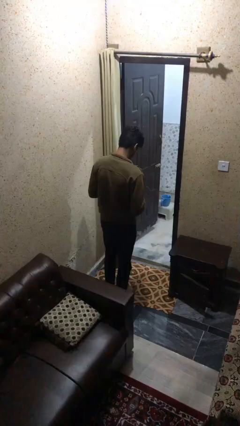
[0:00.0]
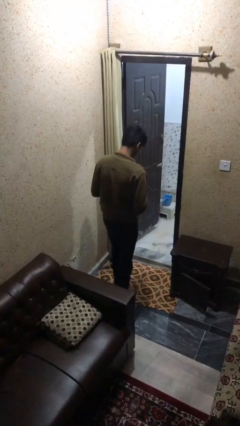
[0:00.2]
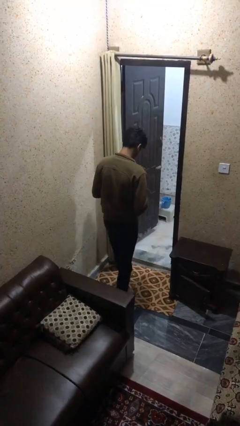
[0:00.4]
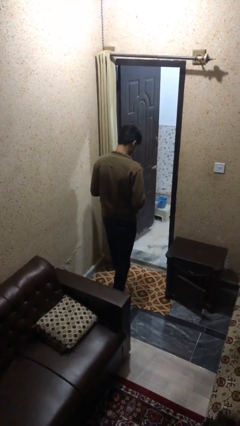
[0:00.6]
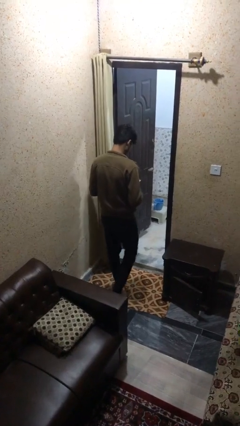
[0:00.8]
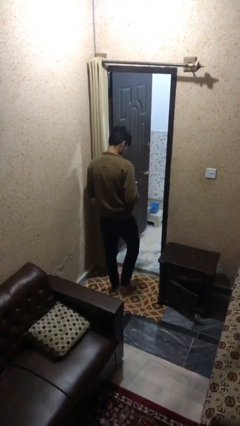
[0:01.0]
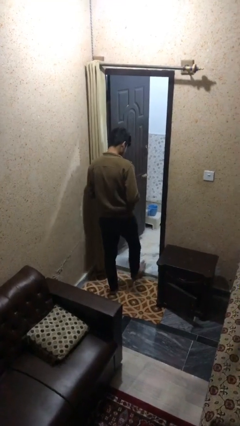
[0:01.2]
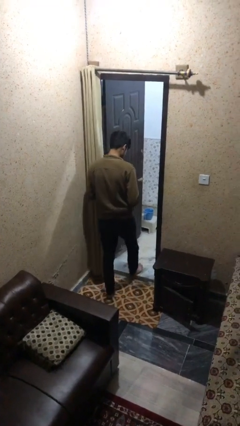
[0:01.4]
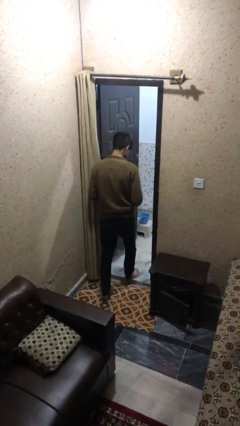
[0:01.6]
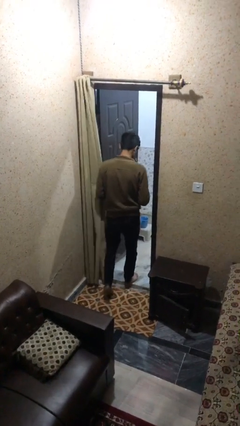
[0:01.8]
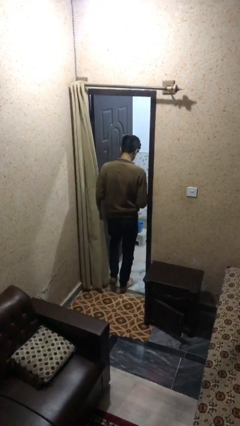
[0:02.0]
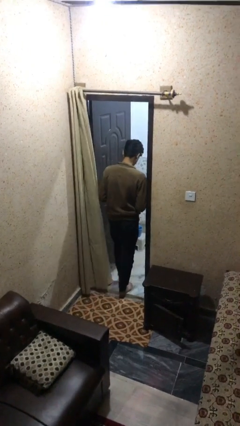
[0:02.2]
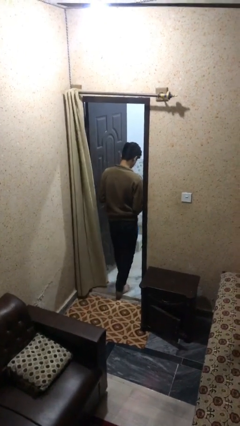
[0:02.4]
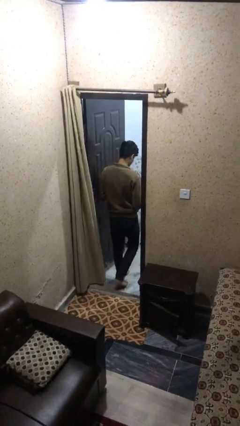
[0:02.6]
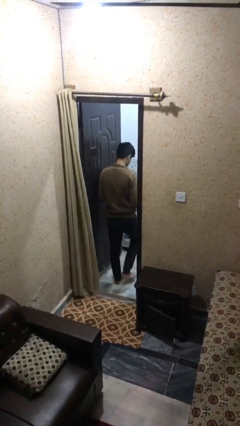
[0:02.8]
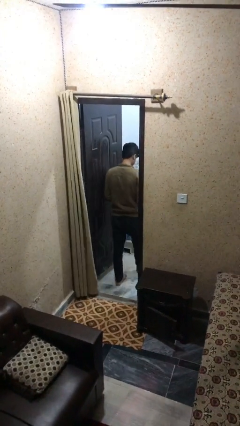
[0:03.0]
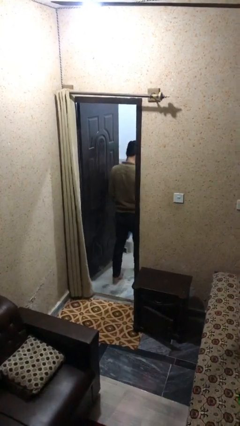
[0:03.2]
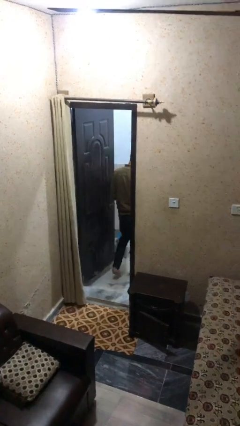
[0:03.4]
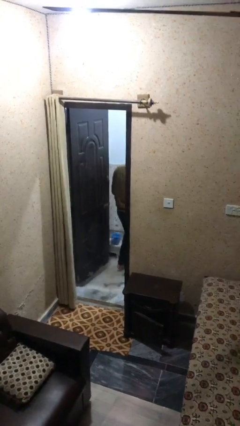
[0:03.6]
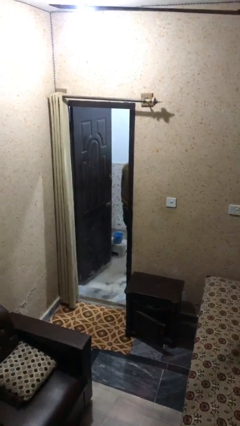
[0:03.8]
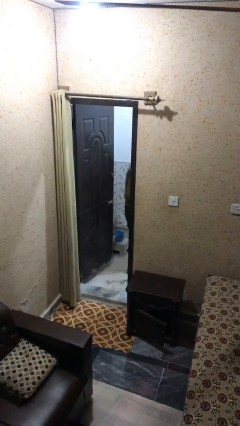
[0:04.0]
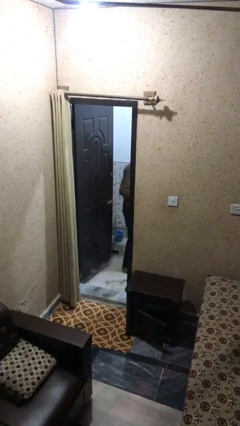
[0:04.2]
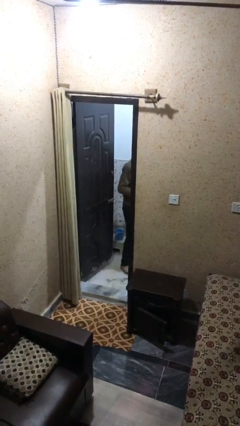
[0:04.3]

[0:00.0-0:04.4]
person enters scene through structure

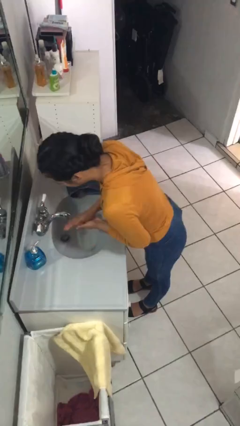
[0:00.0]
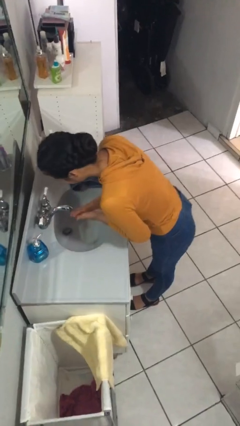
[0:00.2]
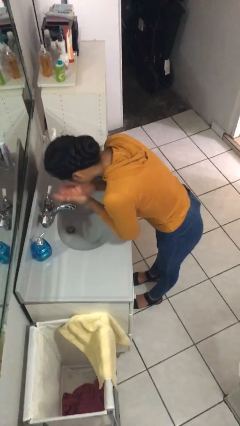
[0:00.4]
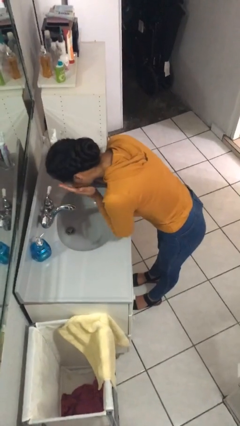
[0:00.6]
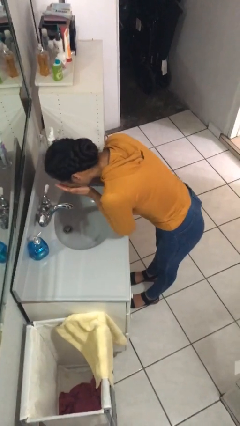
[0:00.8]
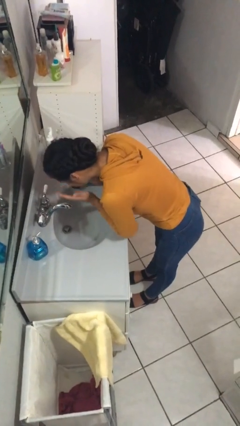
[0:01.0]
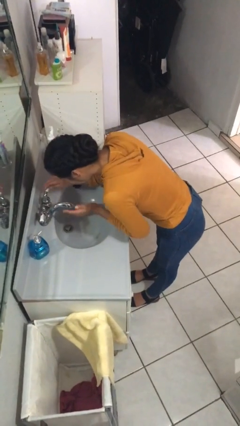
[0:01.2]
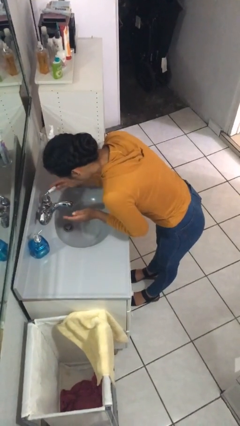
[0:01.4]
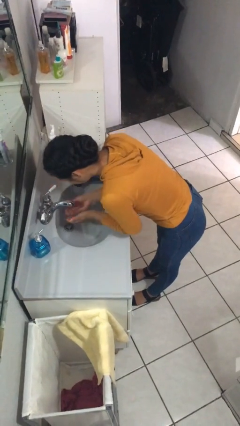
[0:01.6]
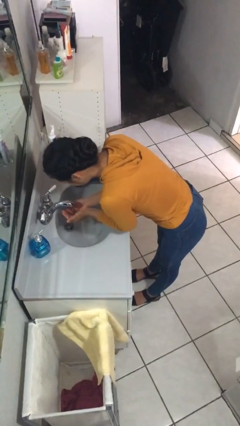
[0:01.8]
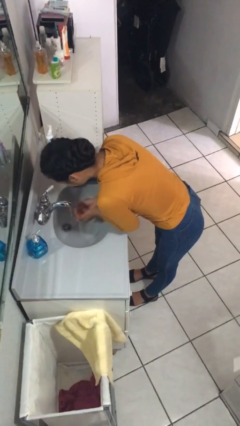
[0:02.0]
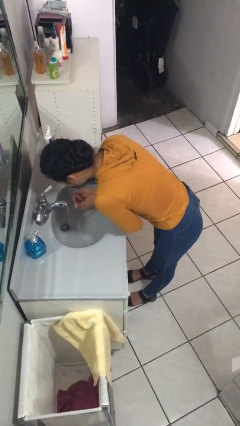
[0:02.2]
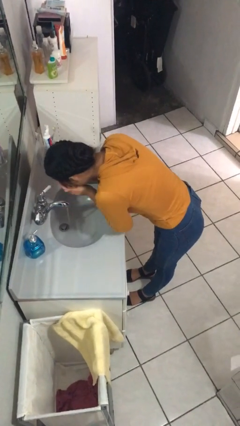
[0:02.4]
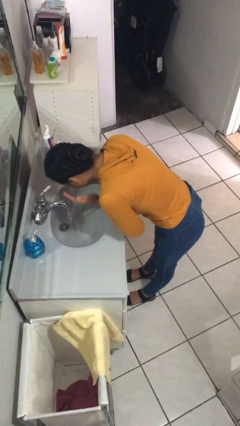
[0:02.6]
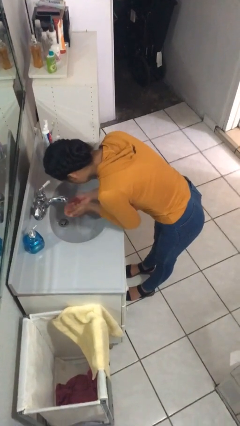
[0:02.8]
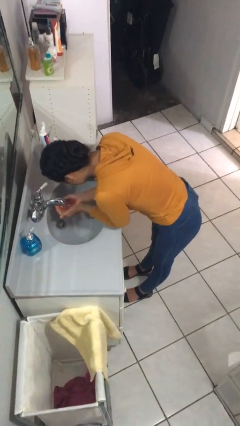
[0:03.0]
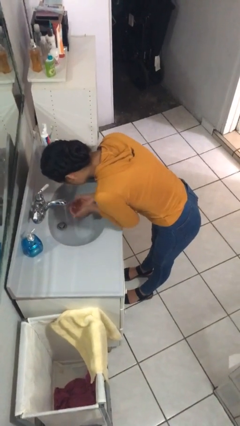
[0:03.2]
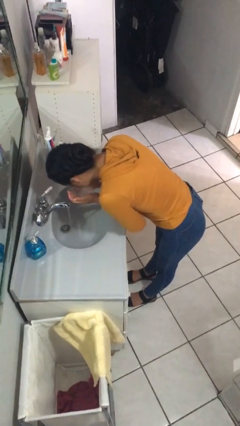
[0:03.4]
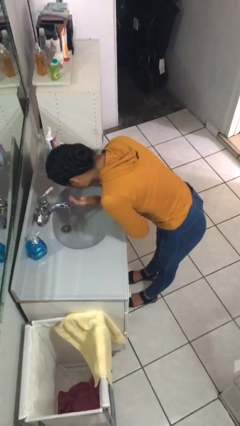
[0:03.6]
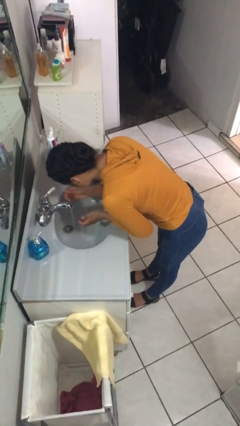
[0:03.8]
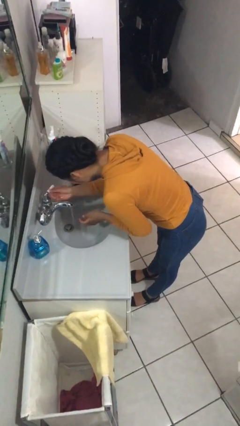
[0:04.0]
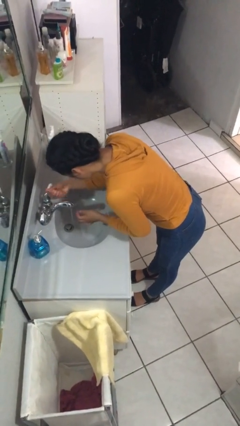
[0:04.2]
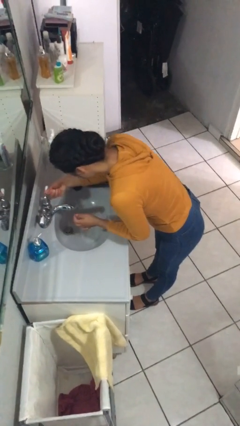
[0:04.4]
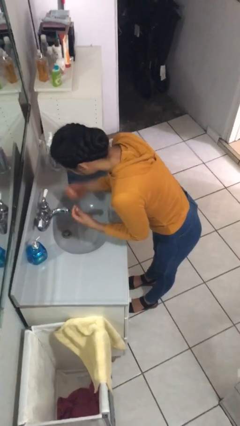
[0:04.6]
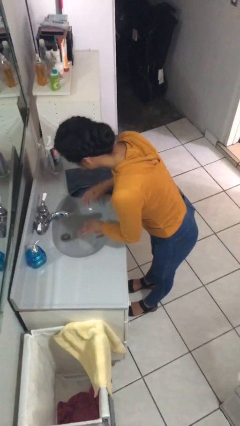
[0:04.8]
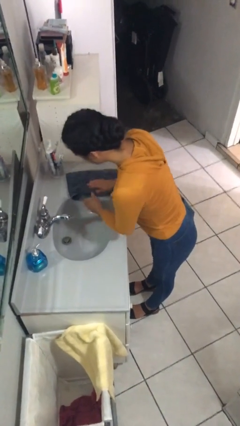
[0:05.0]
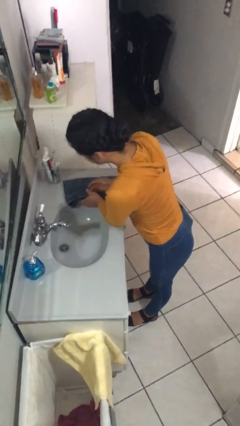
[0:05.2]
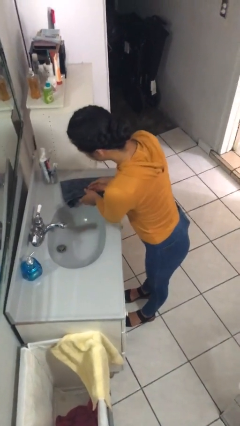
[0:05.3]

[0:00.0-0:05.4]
person washes face

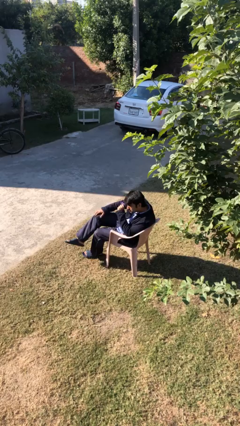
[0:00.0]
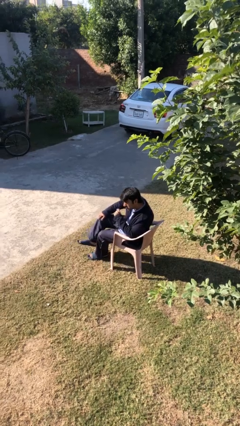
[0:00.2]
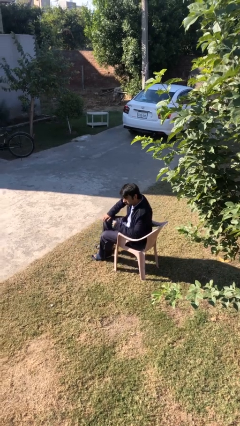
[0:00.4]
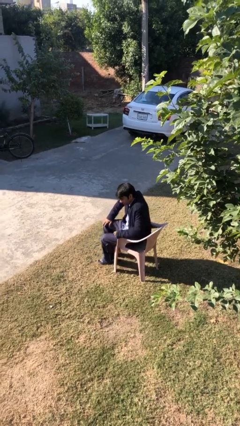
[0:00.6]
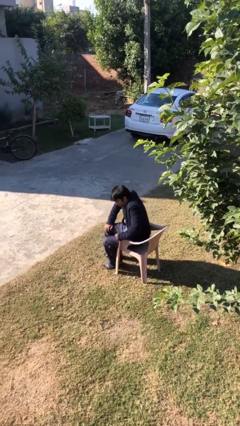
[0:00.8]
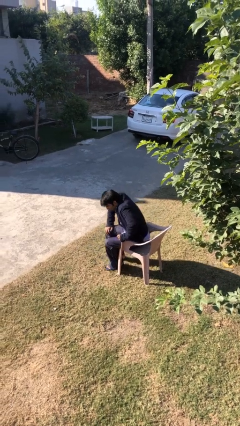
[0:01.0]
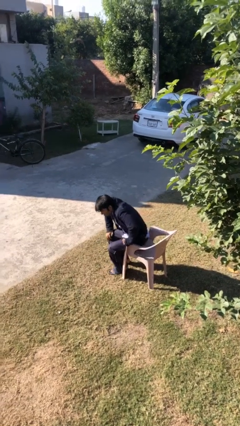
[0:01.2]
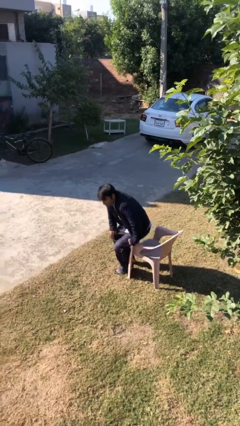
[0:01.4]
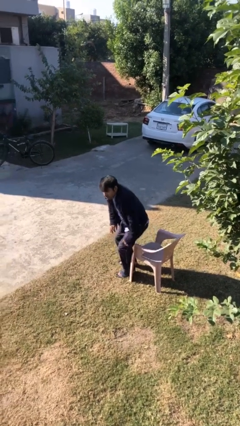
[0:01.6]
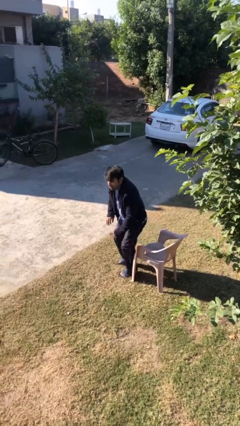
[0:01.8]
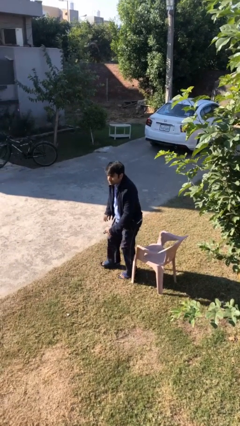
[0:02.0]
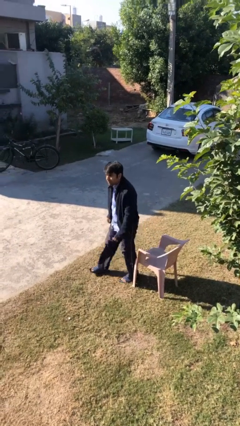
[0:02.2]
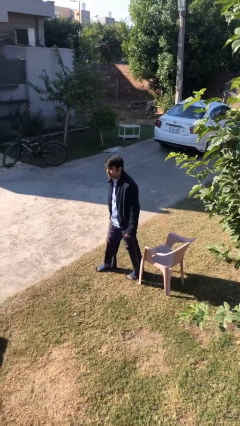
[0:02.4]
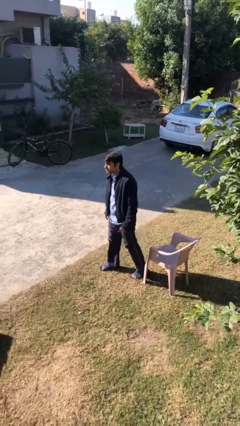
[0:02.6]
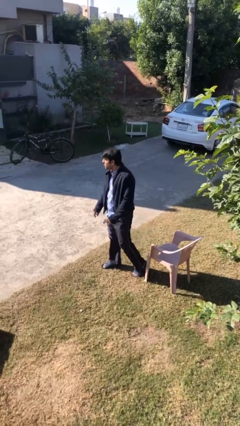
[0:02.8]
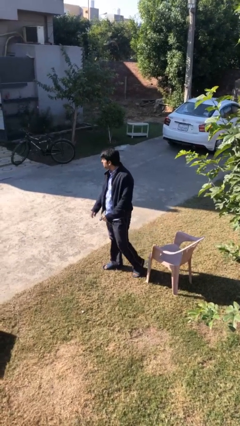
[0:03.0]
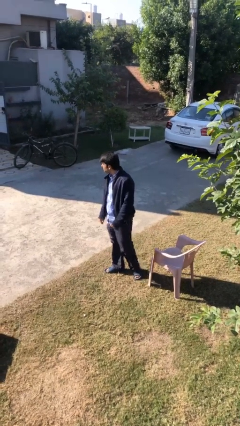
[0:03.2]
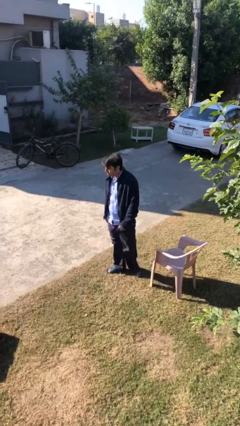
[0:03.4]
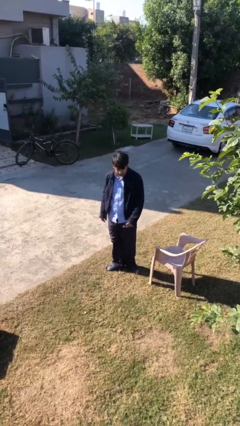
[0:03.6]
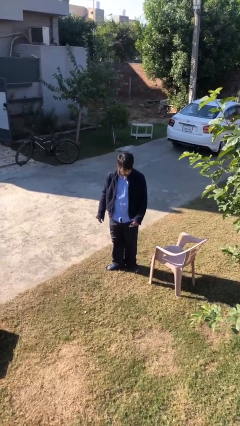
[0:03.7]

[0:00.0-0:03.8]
person stands up

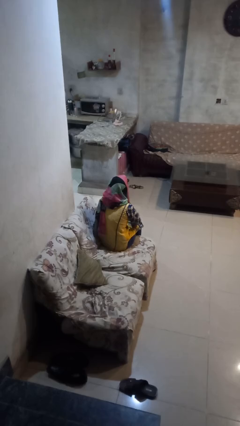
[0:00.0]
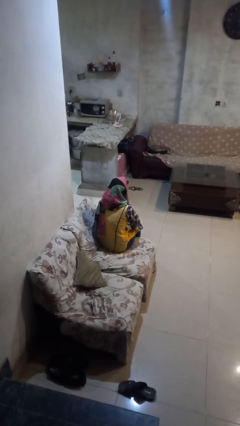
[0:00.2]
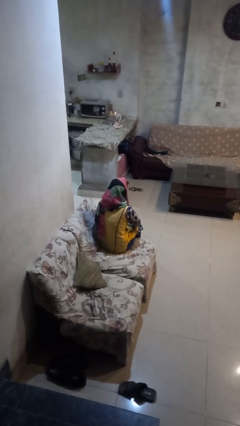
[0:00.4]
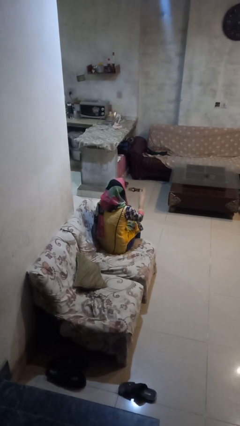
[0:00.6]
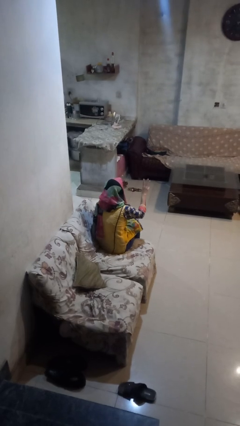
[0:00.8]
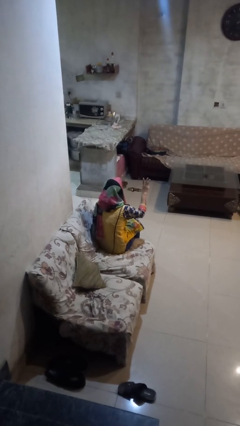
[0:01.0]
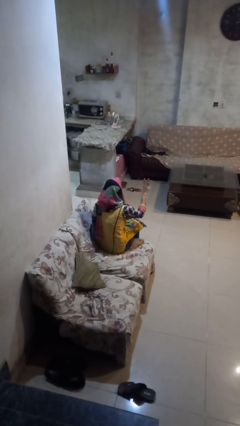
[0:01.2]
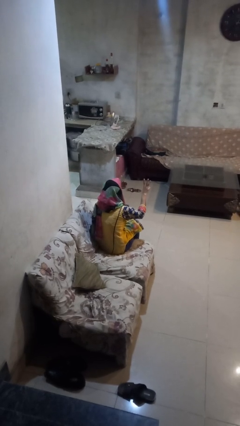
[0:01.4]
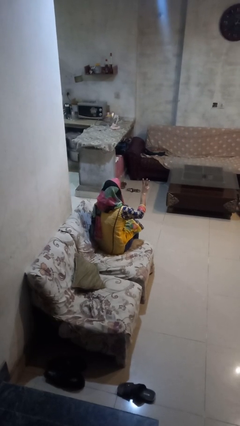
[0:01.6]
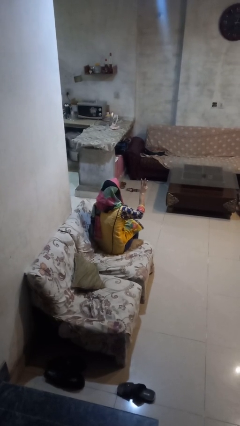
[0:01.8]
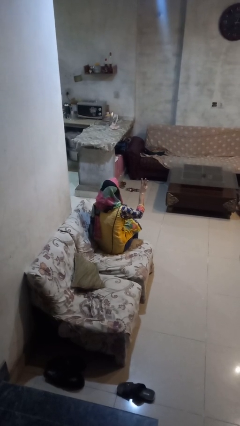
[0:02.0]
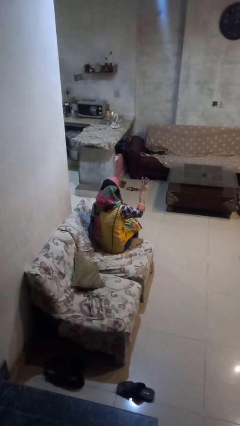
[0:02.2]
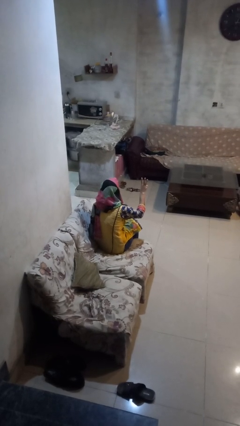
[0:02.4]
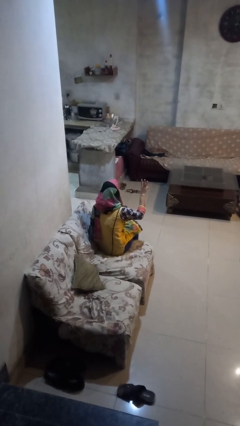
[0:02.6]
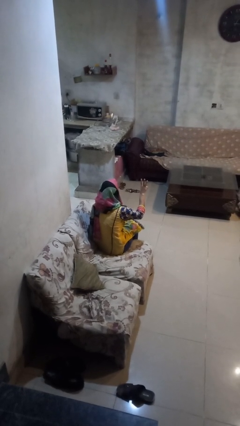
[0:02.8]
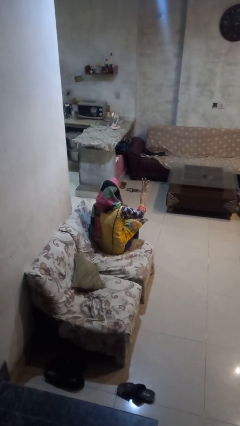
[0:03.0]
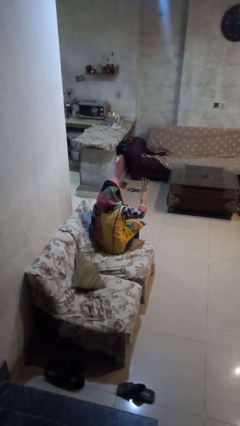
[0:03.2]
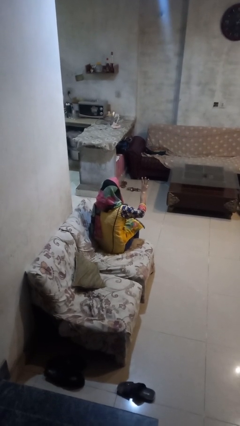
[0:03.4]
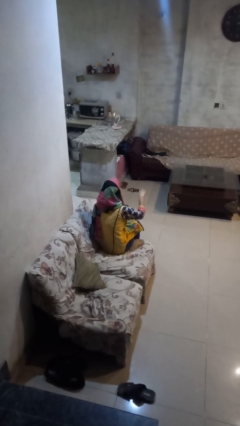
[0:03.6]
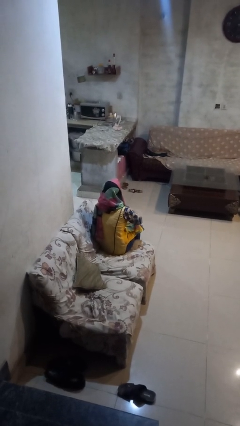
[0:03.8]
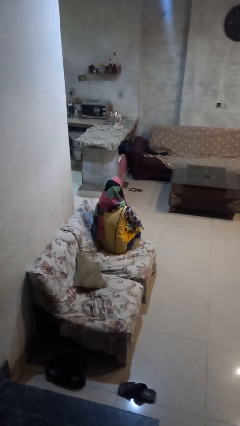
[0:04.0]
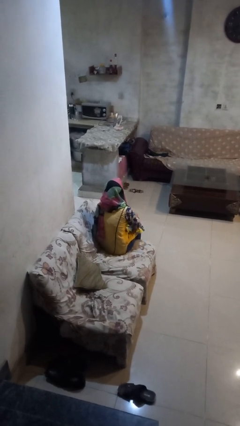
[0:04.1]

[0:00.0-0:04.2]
person gestures number three
